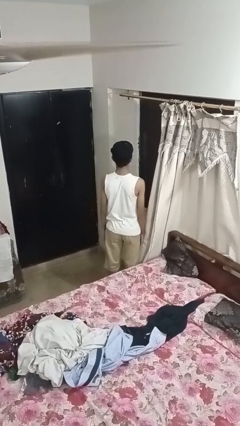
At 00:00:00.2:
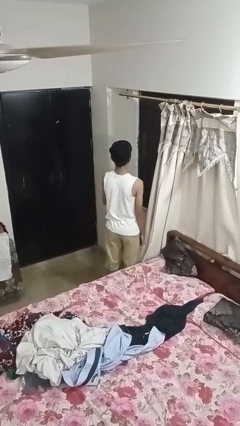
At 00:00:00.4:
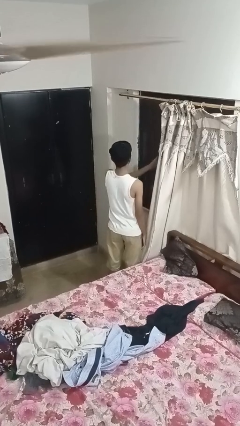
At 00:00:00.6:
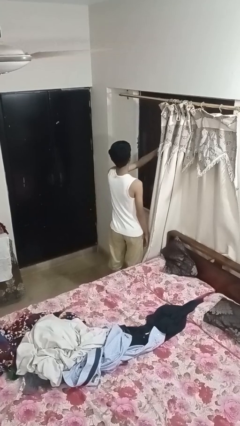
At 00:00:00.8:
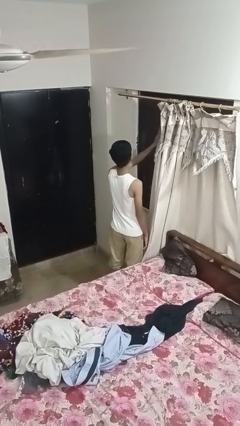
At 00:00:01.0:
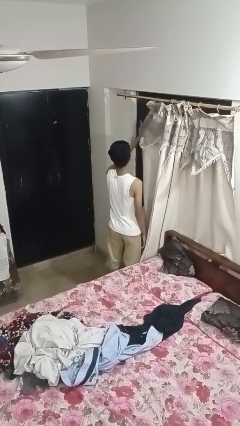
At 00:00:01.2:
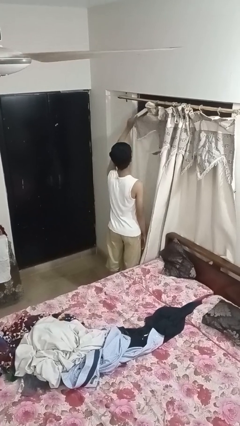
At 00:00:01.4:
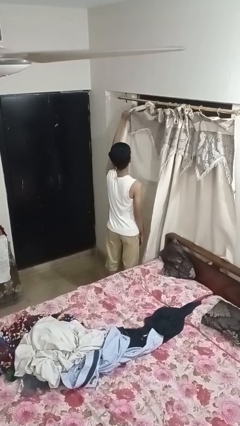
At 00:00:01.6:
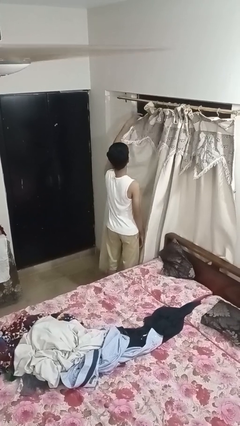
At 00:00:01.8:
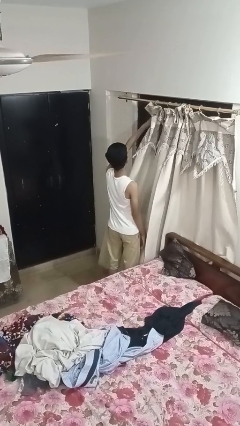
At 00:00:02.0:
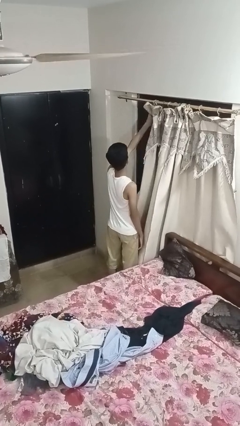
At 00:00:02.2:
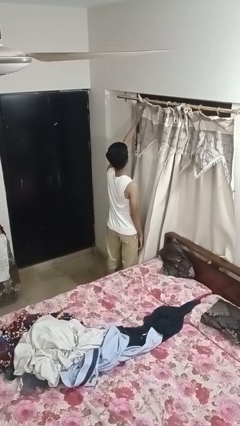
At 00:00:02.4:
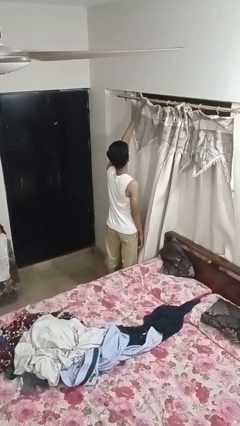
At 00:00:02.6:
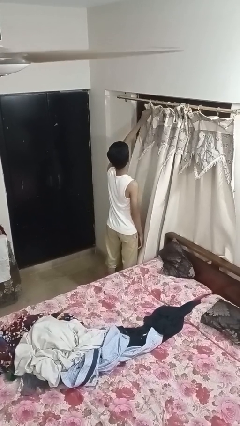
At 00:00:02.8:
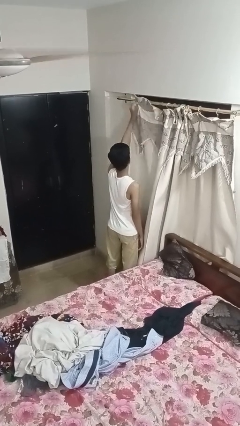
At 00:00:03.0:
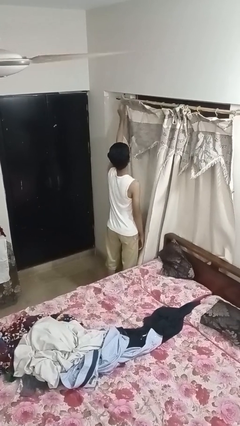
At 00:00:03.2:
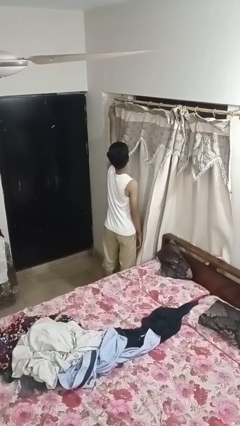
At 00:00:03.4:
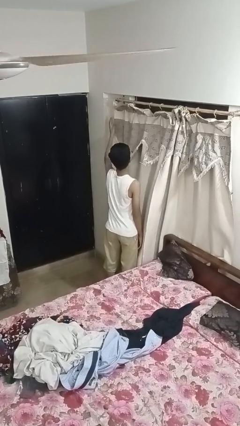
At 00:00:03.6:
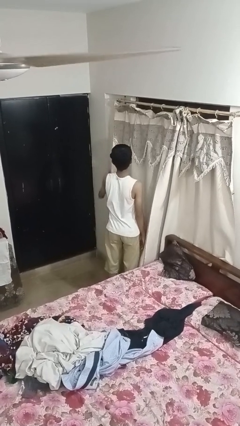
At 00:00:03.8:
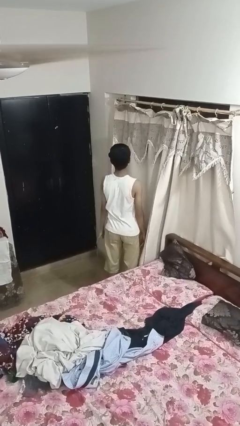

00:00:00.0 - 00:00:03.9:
person closes curtains

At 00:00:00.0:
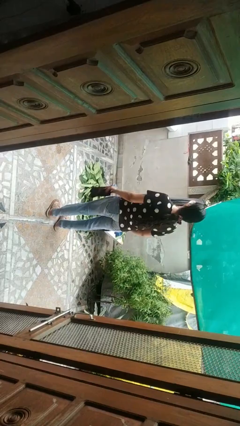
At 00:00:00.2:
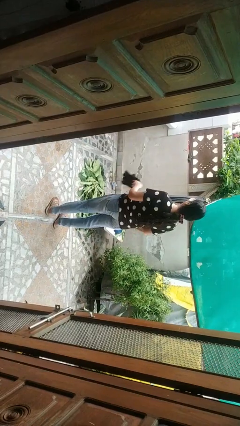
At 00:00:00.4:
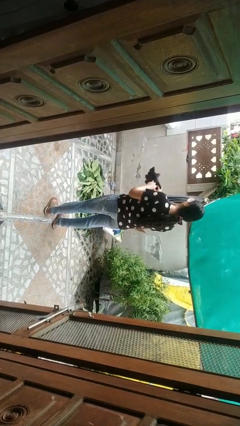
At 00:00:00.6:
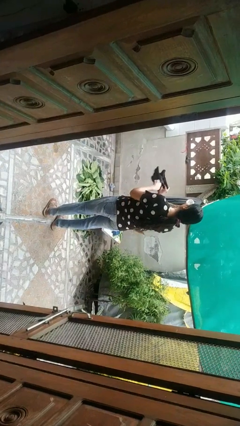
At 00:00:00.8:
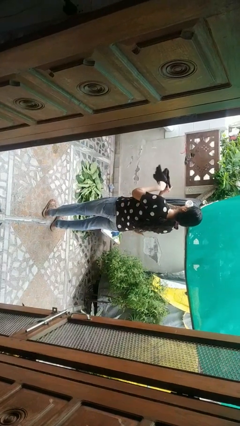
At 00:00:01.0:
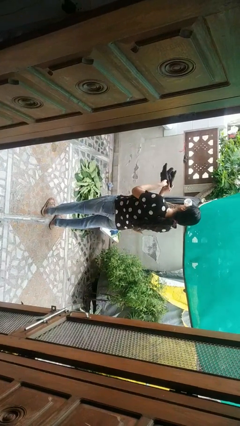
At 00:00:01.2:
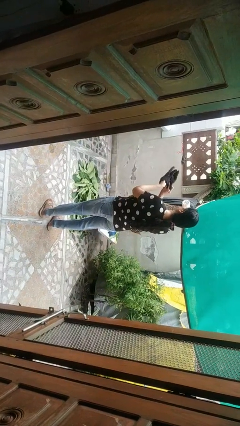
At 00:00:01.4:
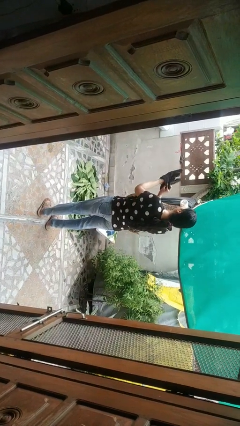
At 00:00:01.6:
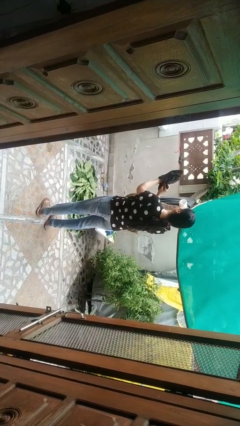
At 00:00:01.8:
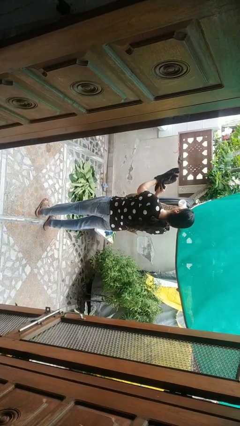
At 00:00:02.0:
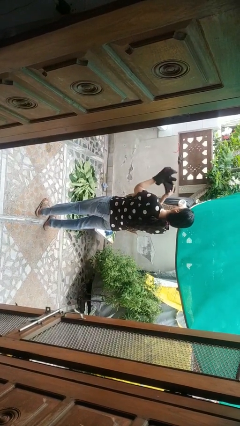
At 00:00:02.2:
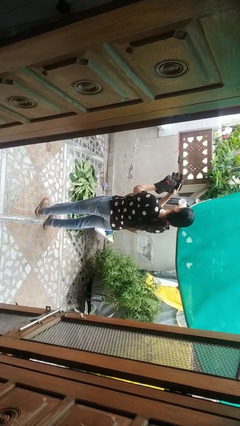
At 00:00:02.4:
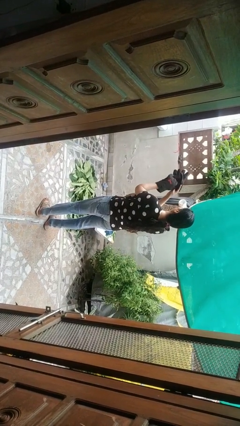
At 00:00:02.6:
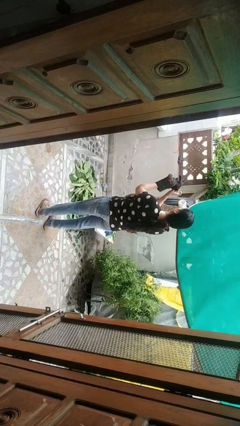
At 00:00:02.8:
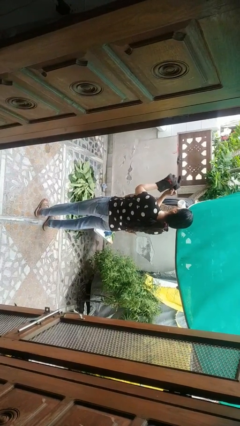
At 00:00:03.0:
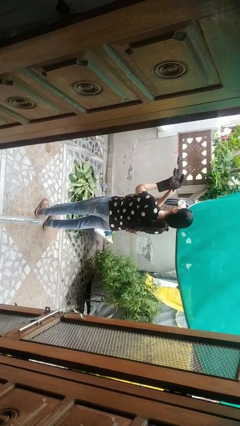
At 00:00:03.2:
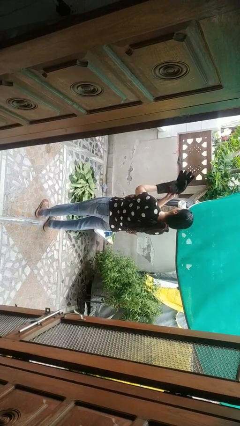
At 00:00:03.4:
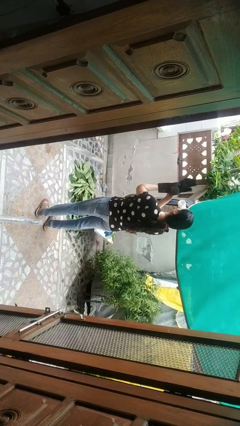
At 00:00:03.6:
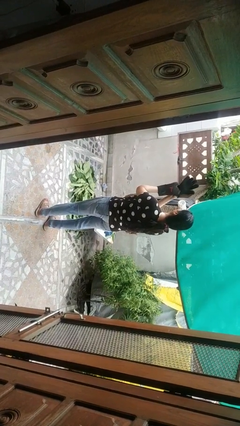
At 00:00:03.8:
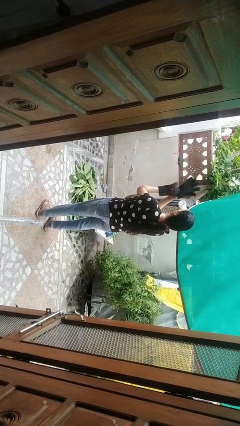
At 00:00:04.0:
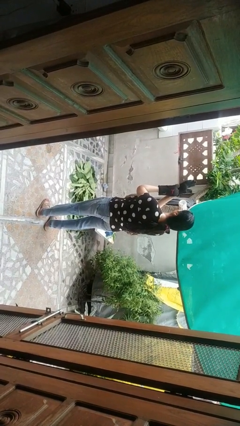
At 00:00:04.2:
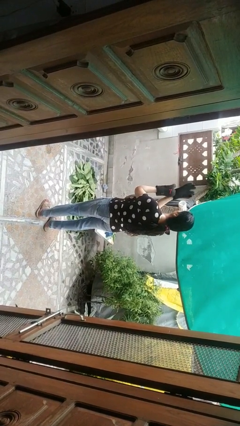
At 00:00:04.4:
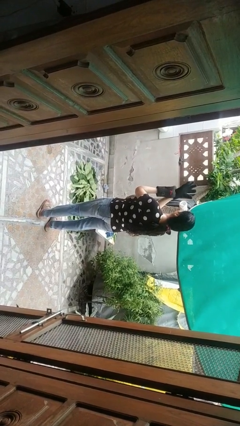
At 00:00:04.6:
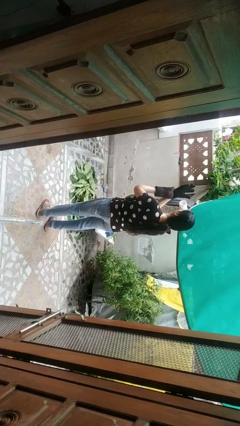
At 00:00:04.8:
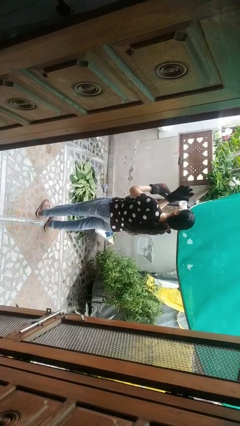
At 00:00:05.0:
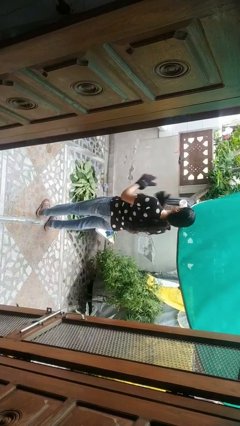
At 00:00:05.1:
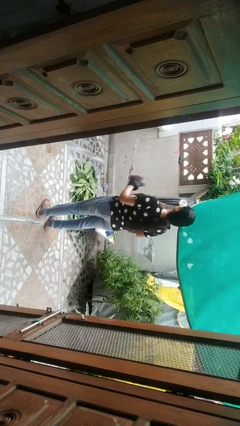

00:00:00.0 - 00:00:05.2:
person puts on gloves

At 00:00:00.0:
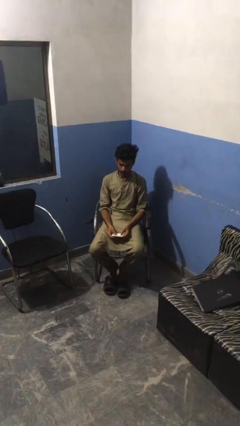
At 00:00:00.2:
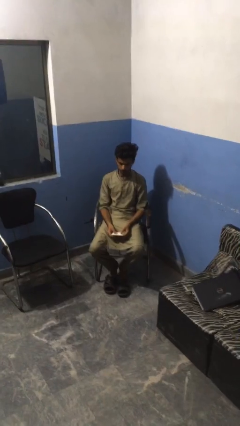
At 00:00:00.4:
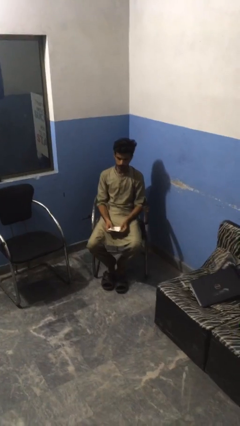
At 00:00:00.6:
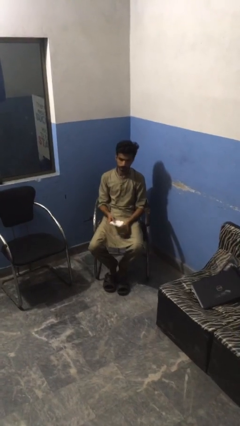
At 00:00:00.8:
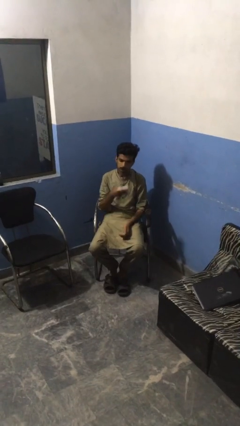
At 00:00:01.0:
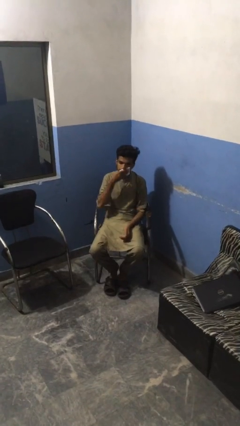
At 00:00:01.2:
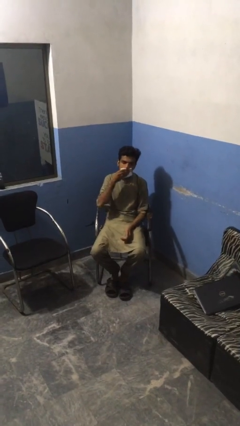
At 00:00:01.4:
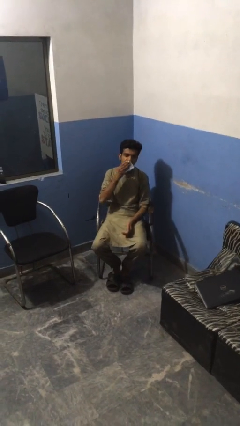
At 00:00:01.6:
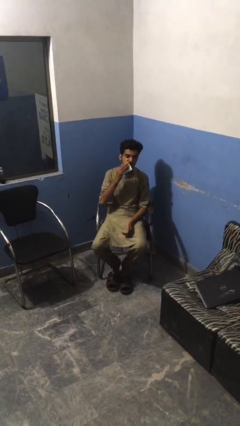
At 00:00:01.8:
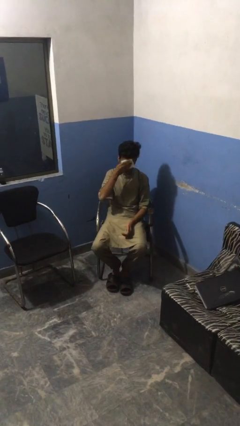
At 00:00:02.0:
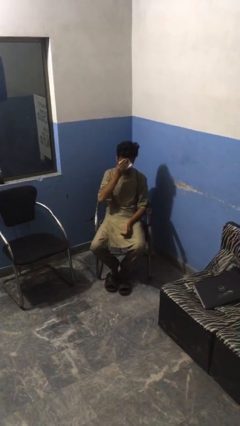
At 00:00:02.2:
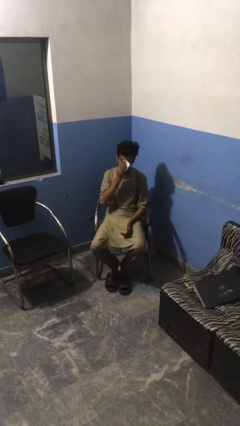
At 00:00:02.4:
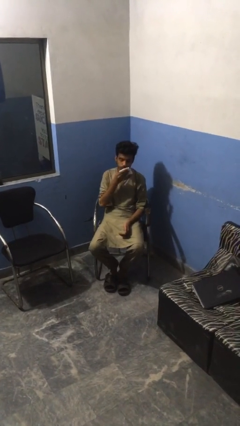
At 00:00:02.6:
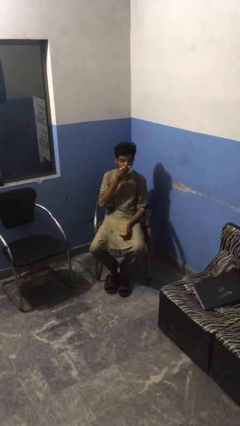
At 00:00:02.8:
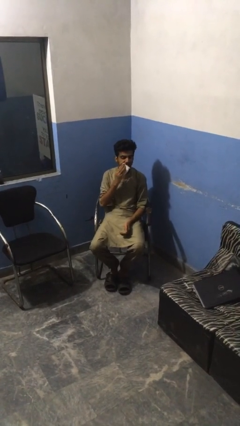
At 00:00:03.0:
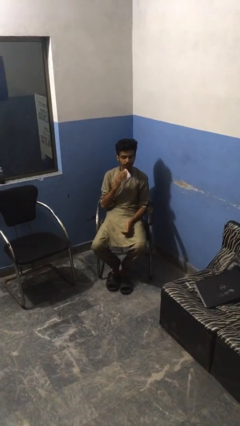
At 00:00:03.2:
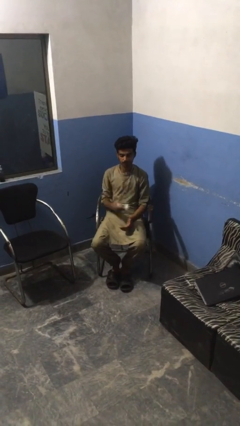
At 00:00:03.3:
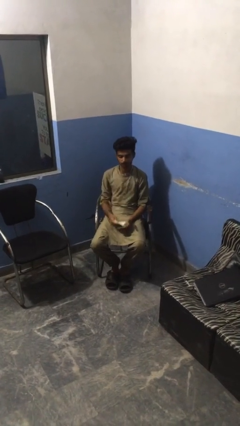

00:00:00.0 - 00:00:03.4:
person wipes mouth with napkin

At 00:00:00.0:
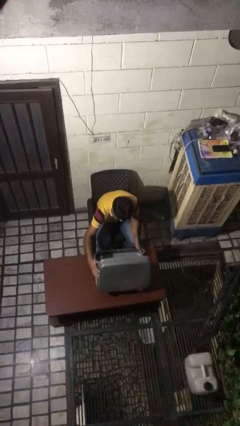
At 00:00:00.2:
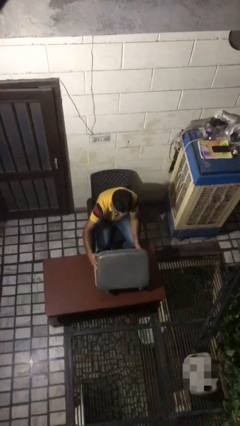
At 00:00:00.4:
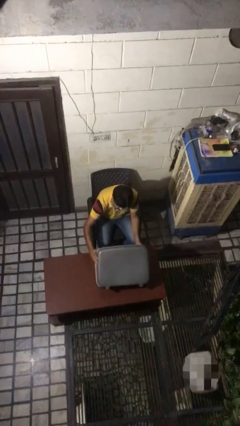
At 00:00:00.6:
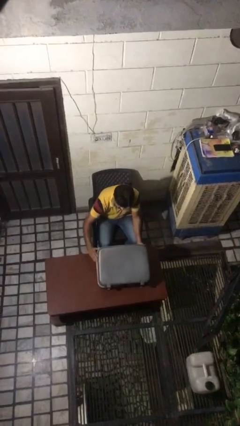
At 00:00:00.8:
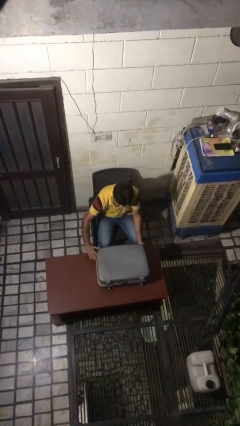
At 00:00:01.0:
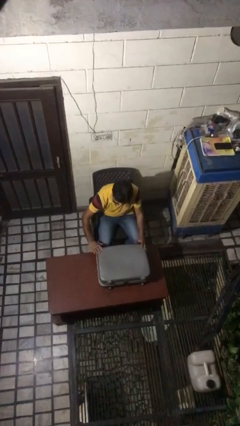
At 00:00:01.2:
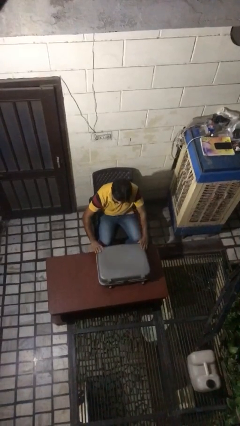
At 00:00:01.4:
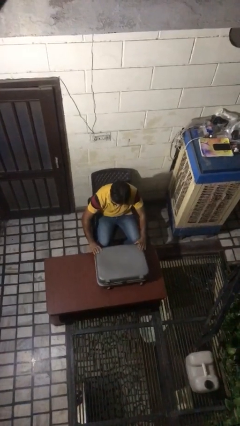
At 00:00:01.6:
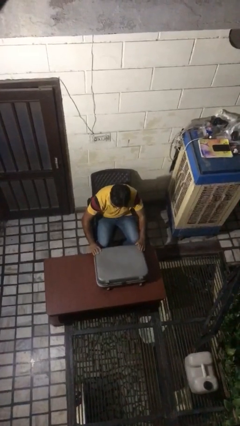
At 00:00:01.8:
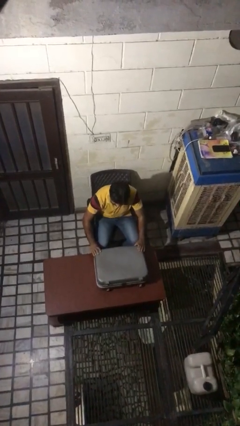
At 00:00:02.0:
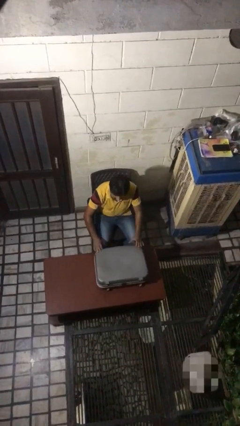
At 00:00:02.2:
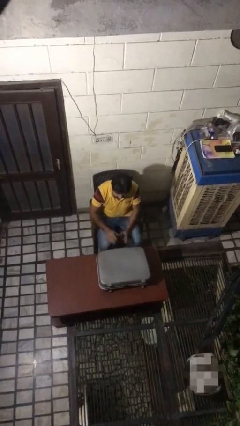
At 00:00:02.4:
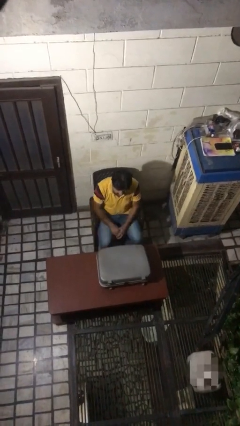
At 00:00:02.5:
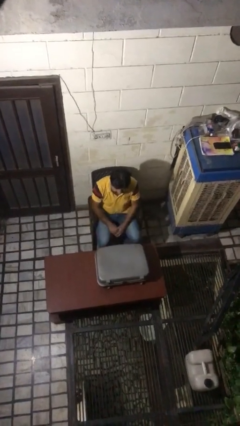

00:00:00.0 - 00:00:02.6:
person closes suitcase

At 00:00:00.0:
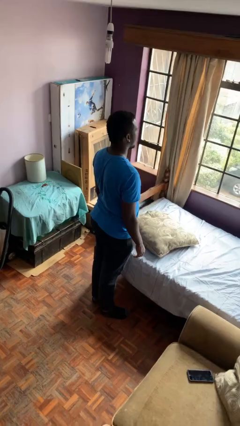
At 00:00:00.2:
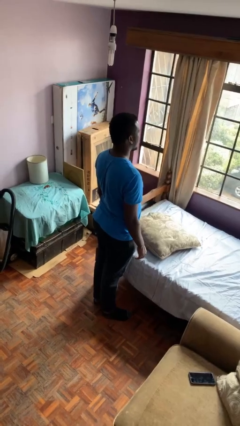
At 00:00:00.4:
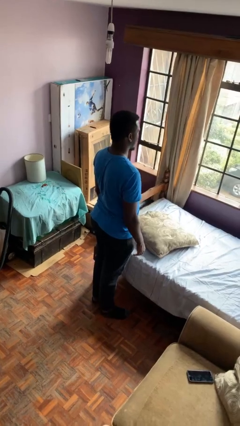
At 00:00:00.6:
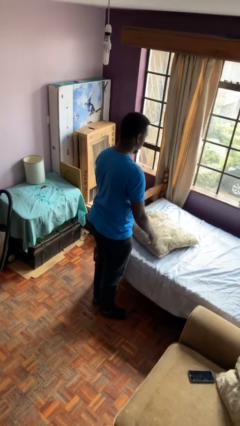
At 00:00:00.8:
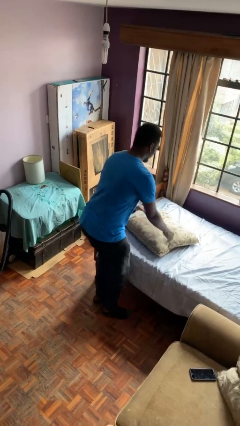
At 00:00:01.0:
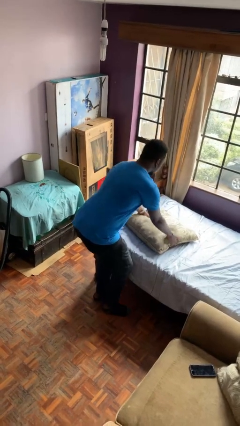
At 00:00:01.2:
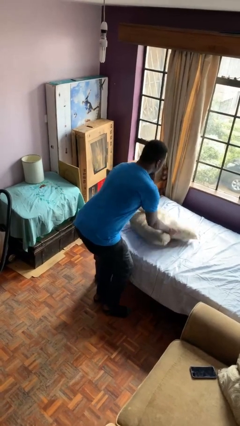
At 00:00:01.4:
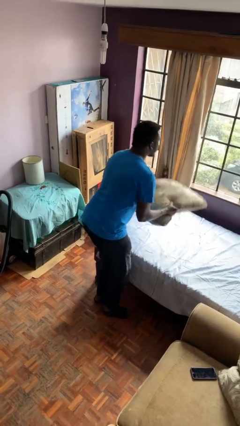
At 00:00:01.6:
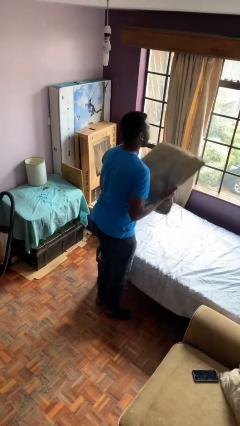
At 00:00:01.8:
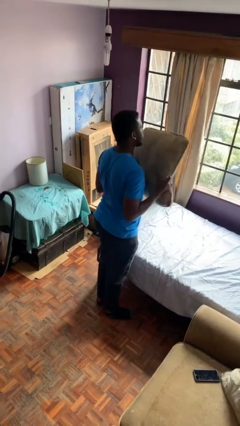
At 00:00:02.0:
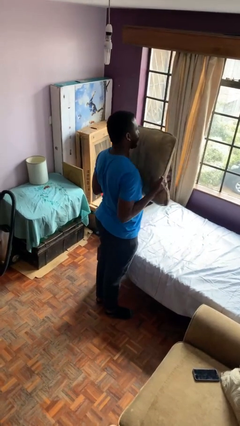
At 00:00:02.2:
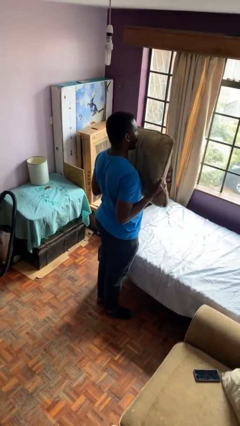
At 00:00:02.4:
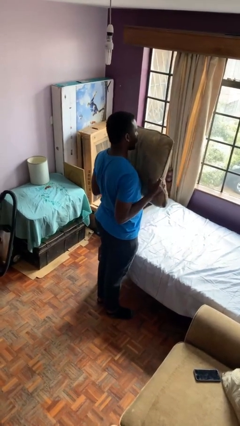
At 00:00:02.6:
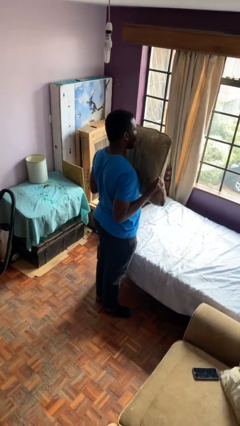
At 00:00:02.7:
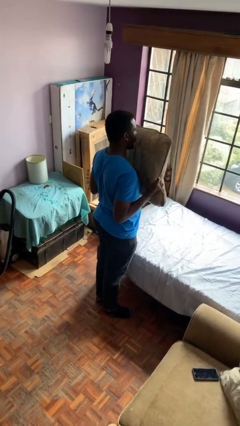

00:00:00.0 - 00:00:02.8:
person picks up object from bed
